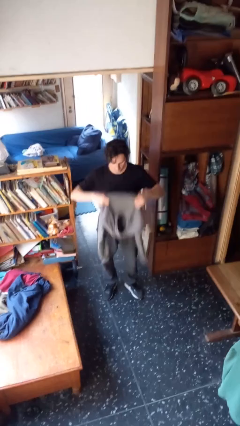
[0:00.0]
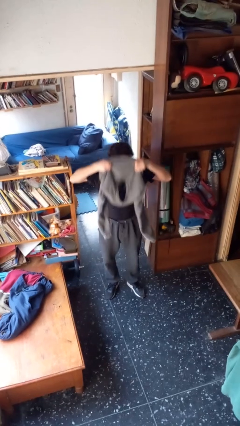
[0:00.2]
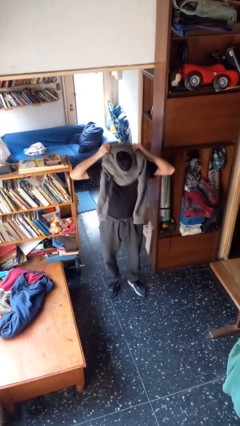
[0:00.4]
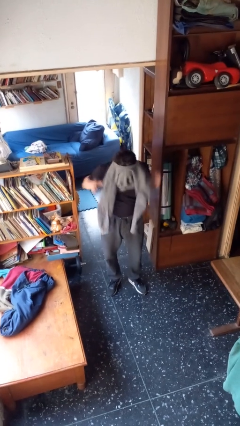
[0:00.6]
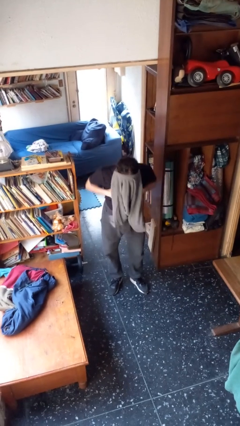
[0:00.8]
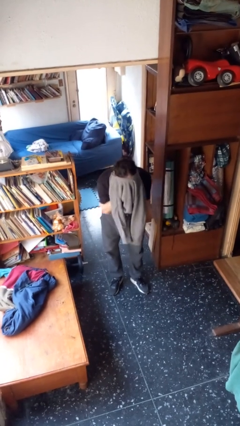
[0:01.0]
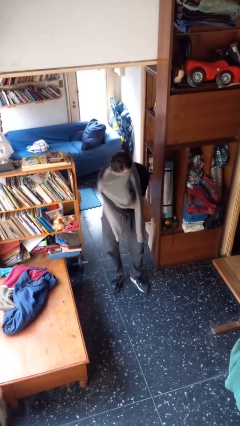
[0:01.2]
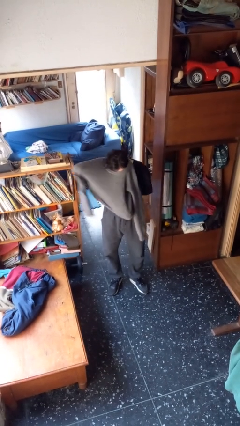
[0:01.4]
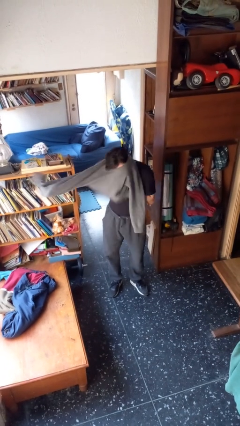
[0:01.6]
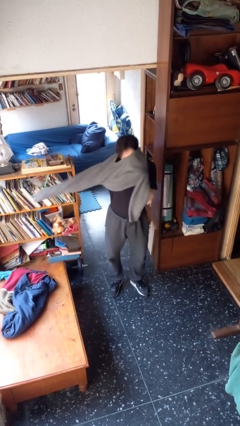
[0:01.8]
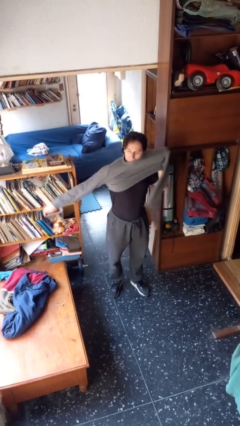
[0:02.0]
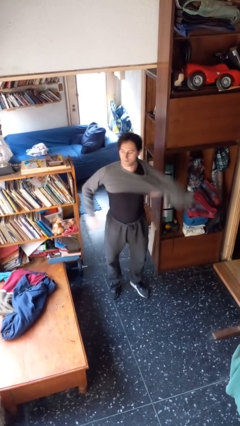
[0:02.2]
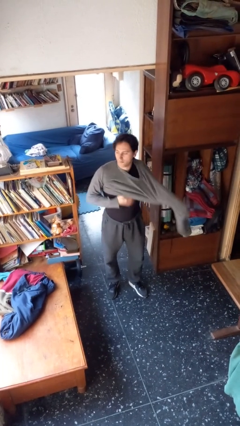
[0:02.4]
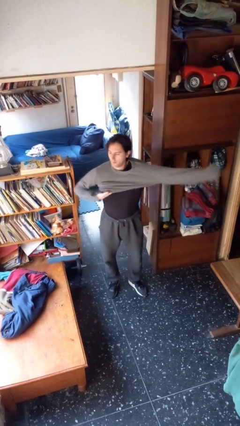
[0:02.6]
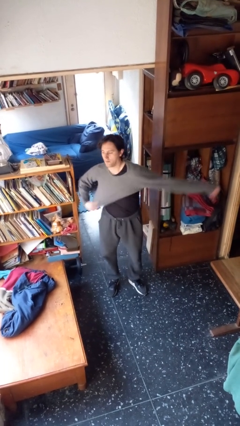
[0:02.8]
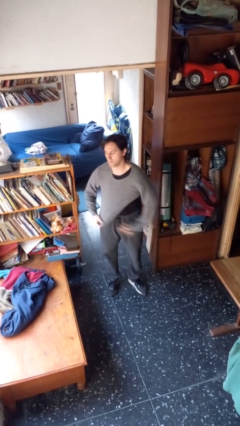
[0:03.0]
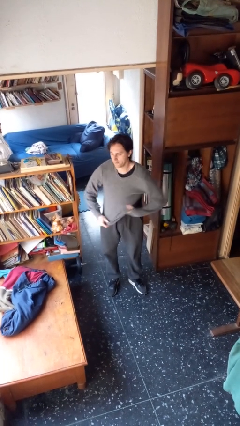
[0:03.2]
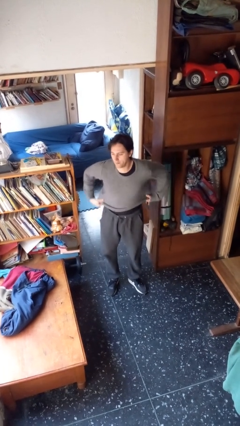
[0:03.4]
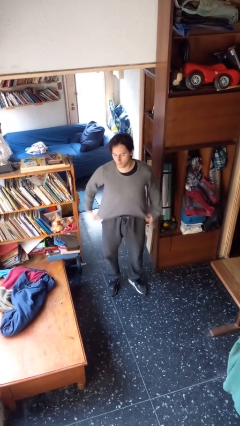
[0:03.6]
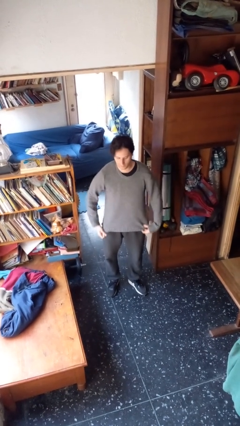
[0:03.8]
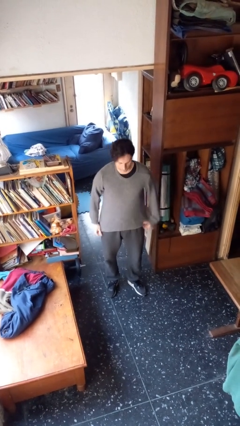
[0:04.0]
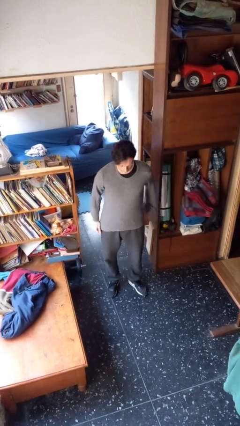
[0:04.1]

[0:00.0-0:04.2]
person puts on shirt

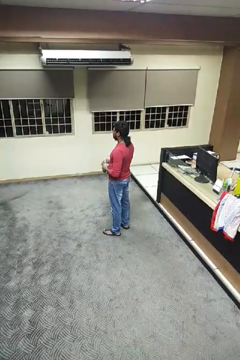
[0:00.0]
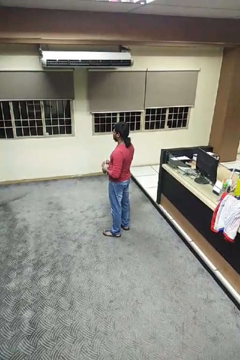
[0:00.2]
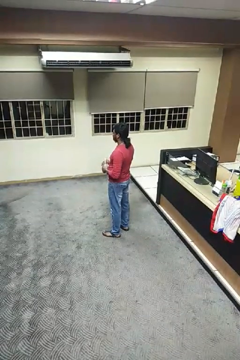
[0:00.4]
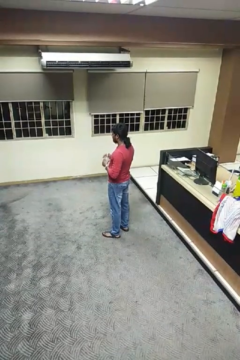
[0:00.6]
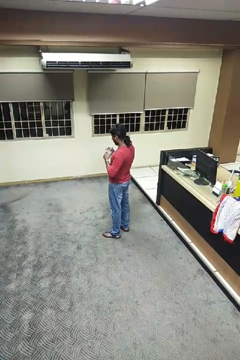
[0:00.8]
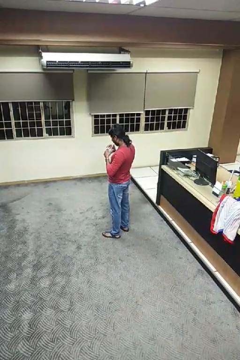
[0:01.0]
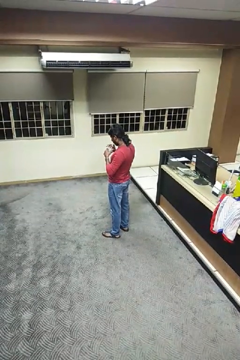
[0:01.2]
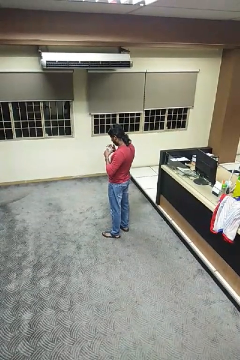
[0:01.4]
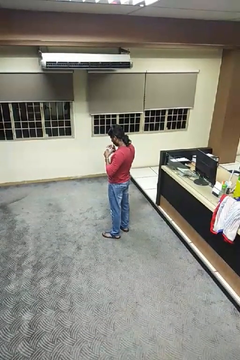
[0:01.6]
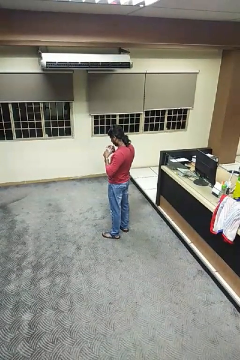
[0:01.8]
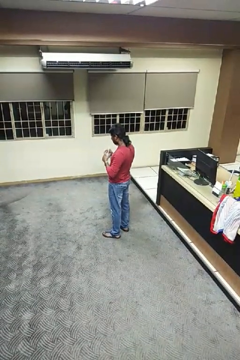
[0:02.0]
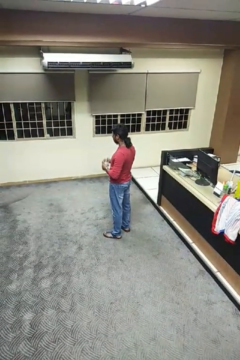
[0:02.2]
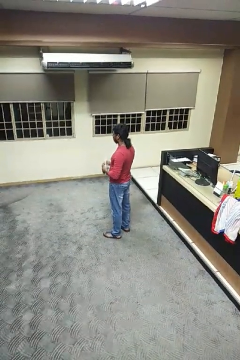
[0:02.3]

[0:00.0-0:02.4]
person drinks from straw

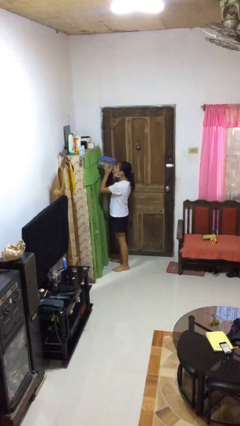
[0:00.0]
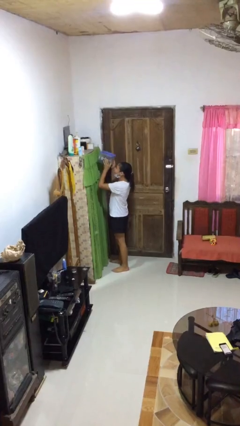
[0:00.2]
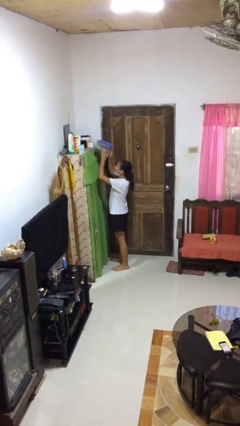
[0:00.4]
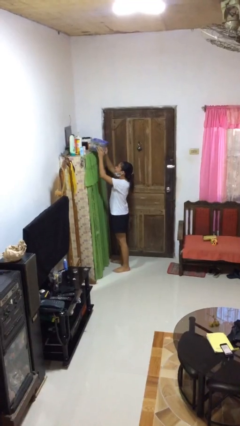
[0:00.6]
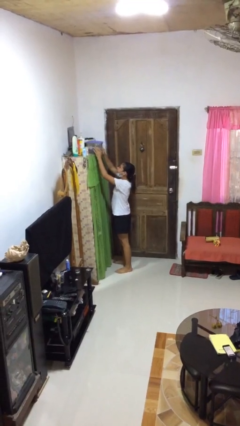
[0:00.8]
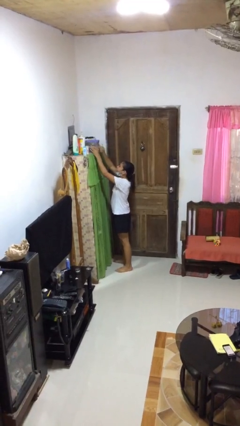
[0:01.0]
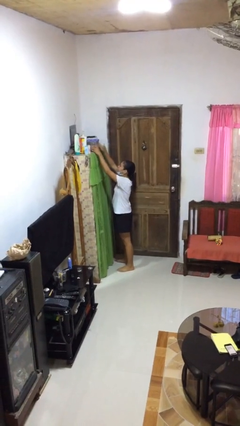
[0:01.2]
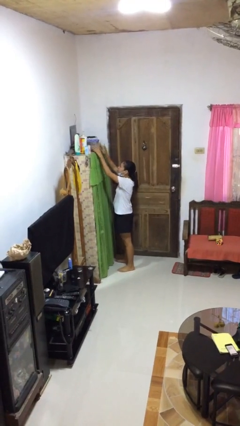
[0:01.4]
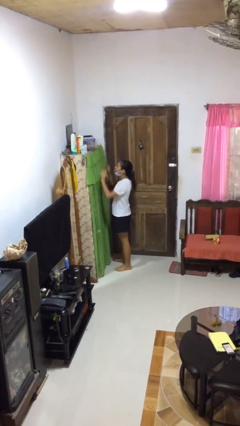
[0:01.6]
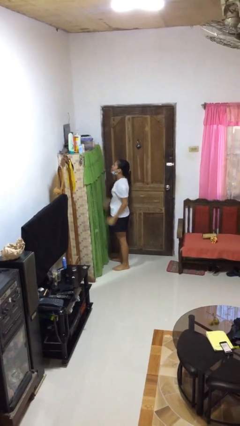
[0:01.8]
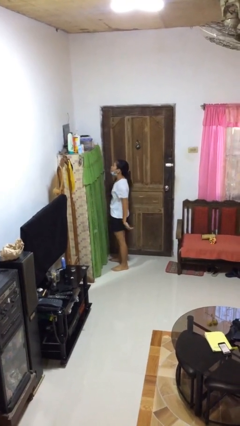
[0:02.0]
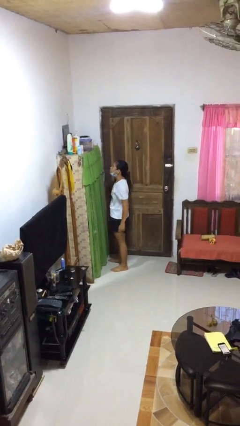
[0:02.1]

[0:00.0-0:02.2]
person puts down object on shelf

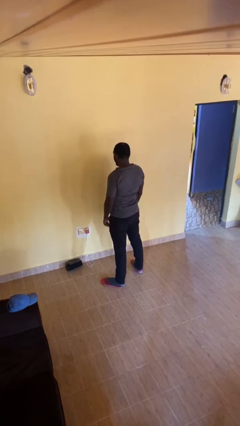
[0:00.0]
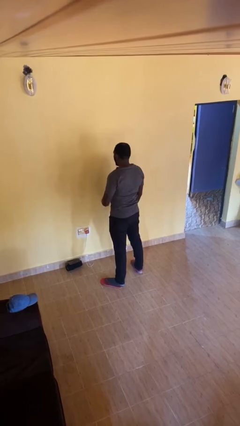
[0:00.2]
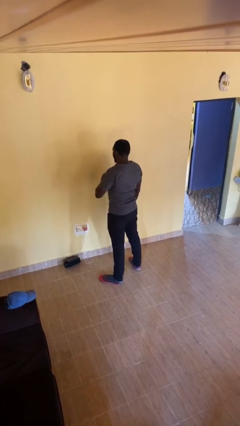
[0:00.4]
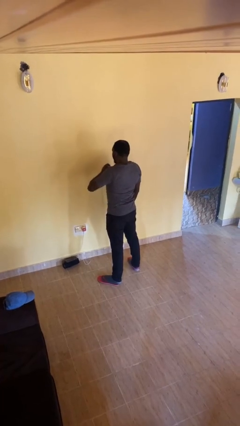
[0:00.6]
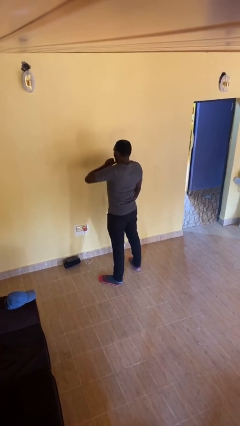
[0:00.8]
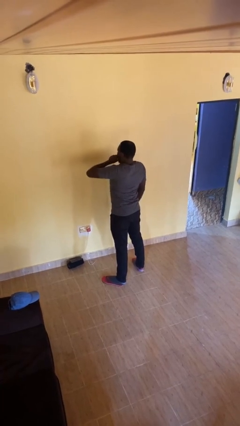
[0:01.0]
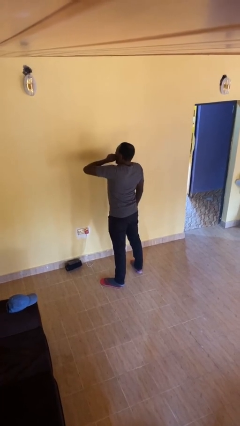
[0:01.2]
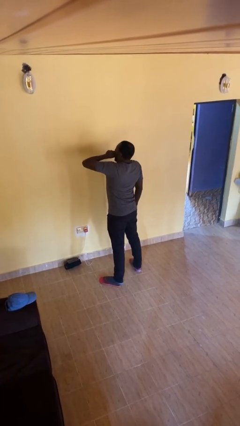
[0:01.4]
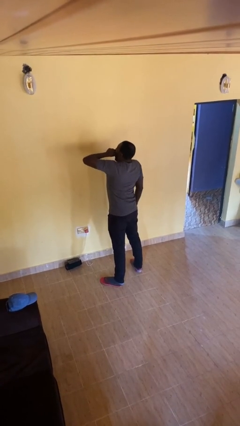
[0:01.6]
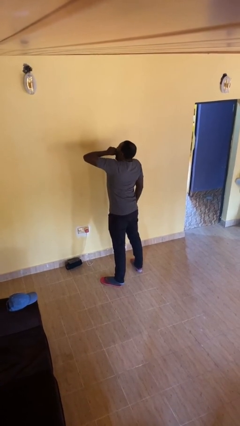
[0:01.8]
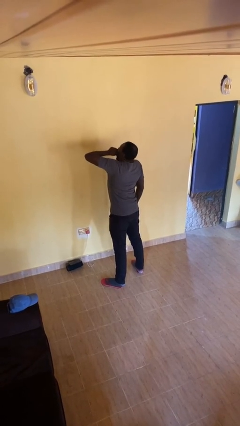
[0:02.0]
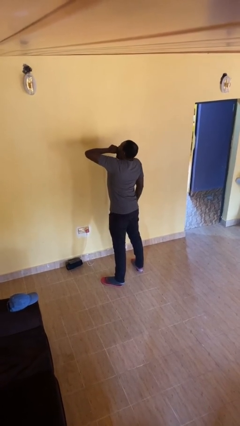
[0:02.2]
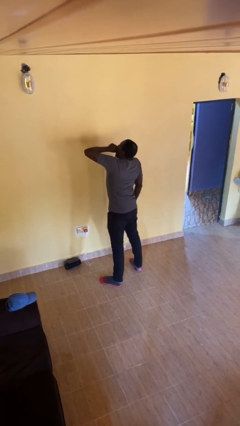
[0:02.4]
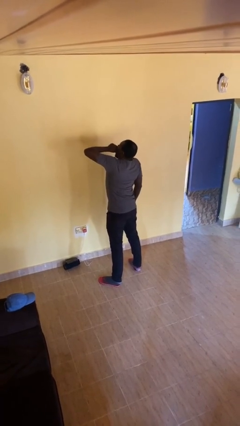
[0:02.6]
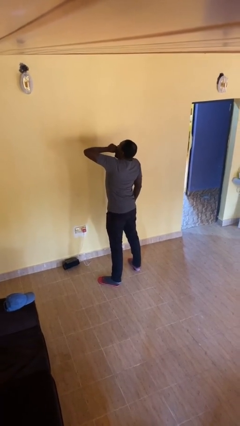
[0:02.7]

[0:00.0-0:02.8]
person yawns

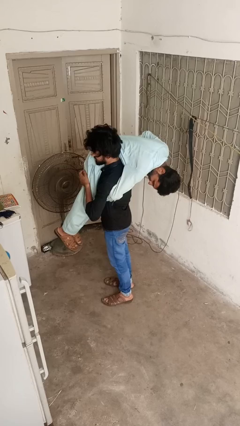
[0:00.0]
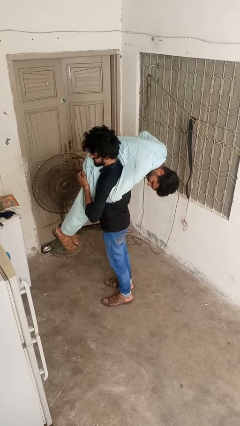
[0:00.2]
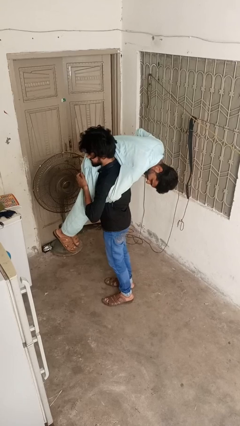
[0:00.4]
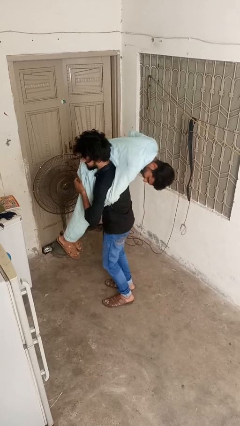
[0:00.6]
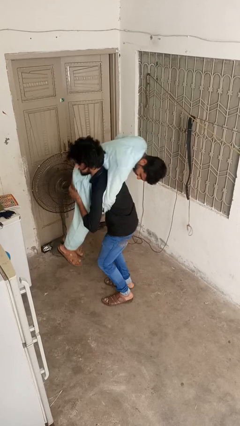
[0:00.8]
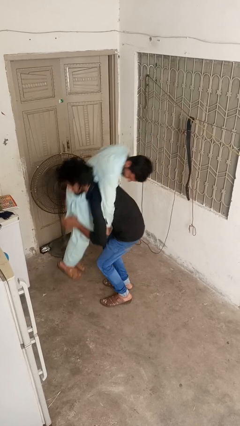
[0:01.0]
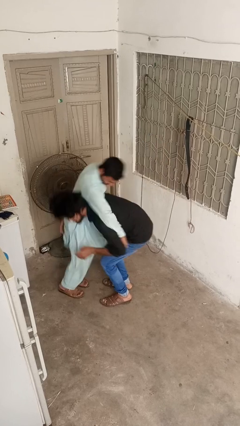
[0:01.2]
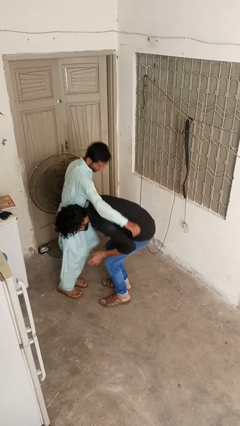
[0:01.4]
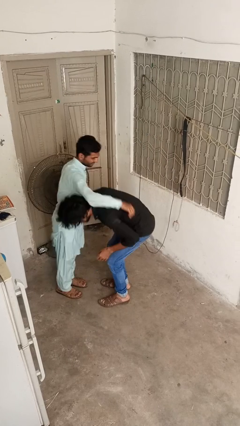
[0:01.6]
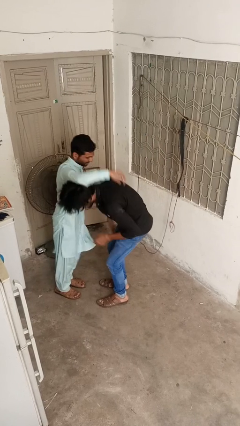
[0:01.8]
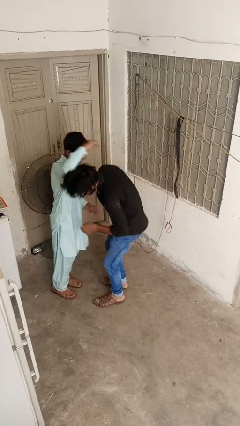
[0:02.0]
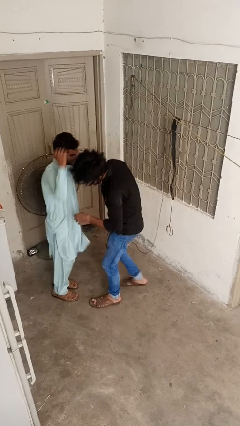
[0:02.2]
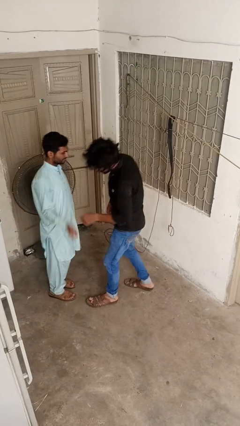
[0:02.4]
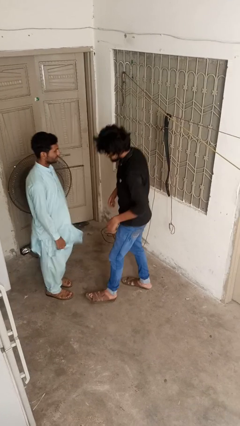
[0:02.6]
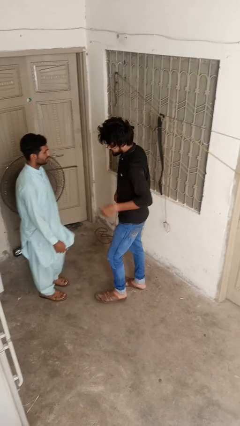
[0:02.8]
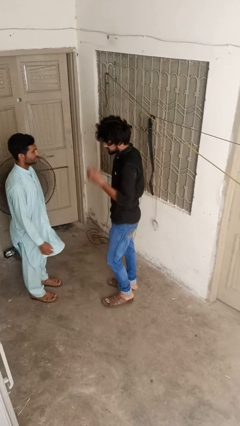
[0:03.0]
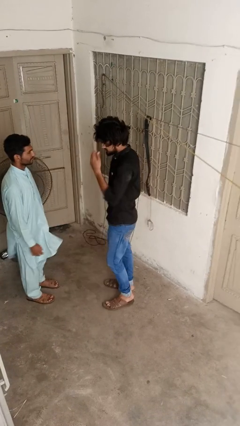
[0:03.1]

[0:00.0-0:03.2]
person puts down person

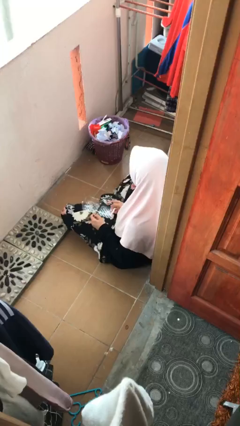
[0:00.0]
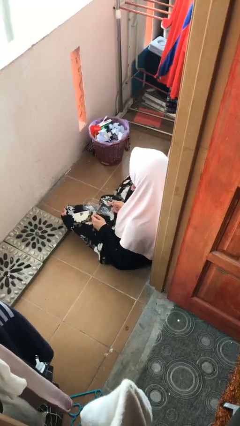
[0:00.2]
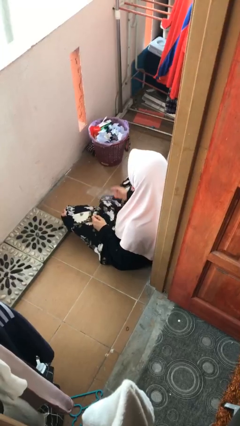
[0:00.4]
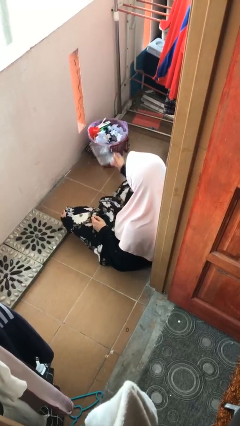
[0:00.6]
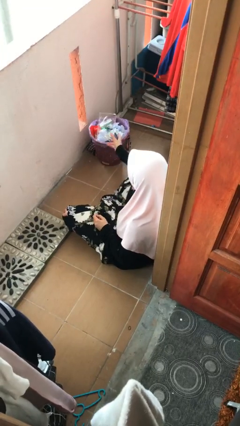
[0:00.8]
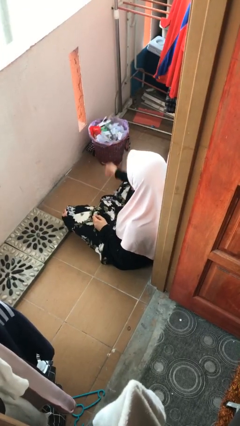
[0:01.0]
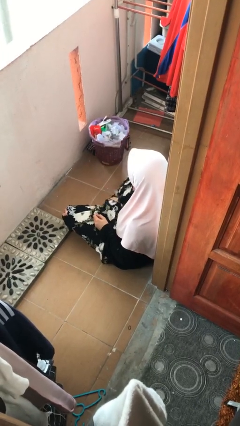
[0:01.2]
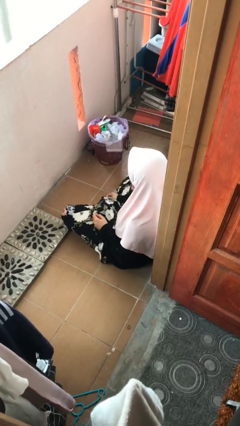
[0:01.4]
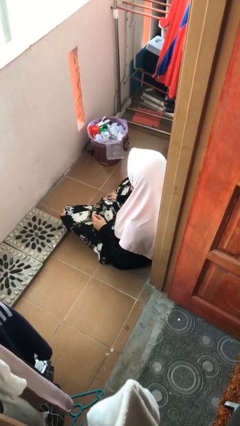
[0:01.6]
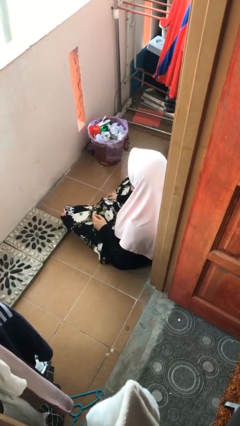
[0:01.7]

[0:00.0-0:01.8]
person discards trash

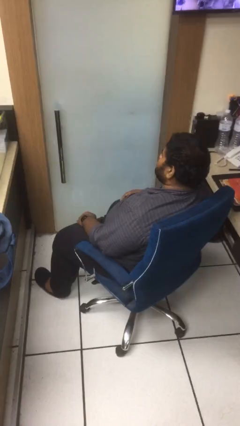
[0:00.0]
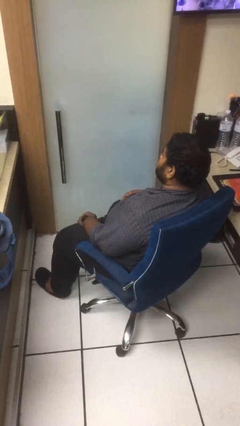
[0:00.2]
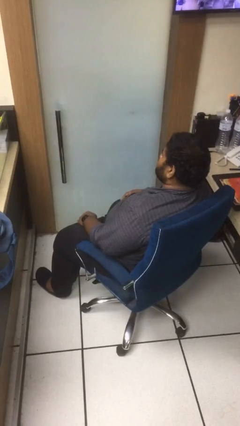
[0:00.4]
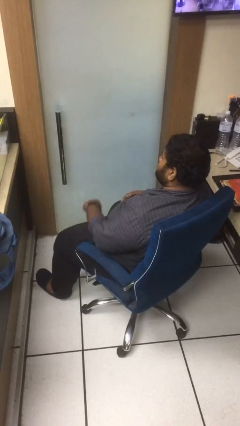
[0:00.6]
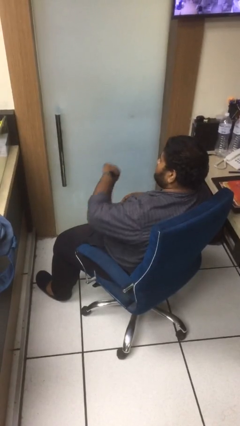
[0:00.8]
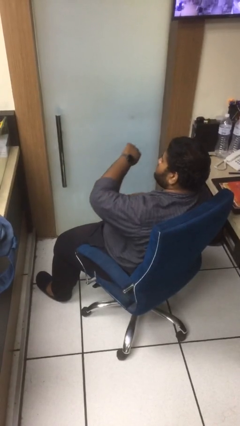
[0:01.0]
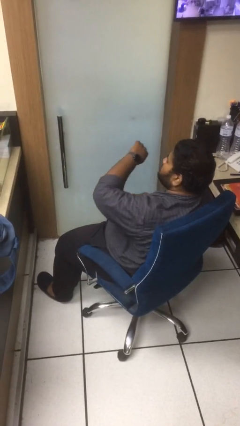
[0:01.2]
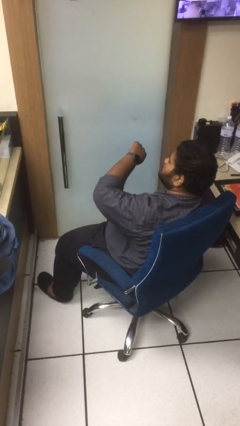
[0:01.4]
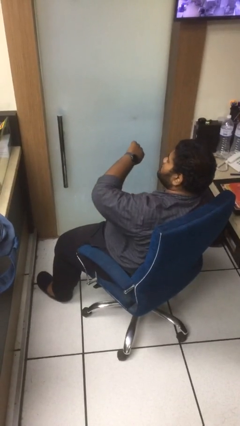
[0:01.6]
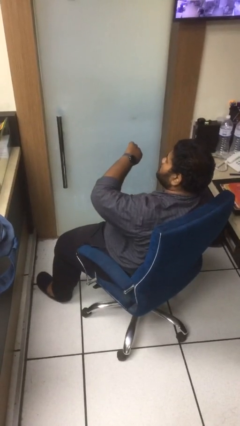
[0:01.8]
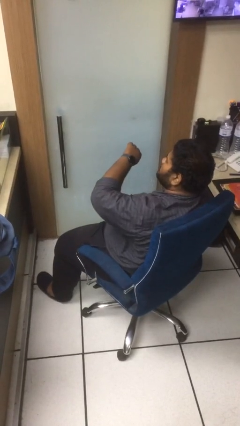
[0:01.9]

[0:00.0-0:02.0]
person looks at wristwatch
